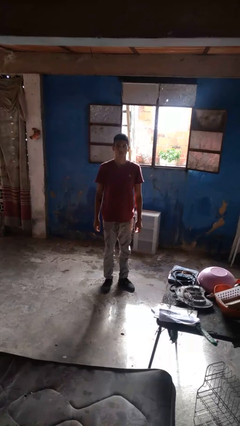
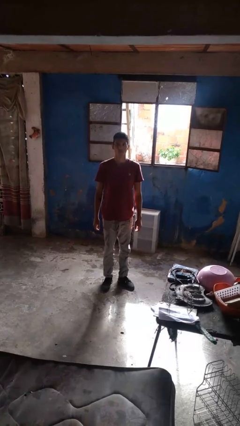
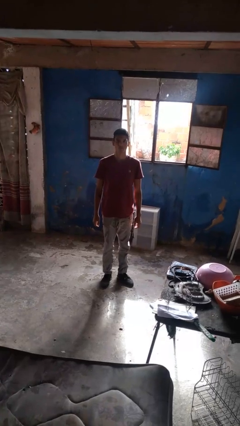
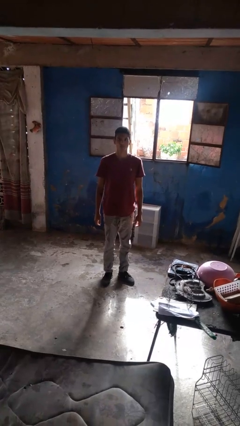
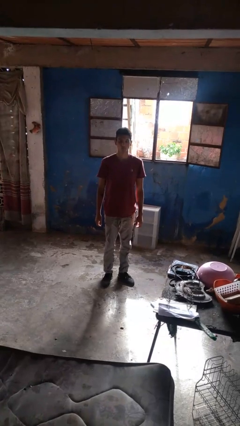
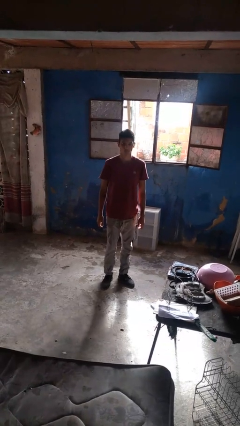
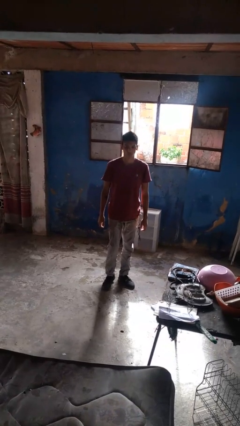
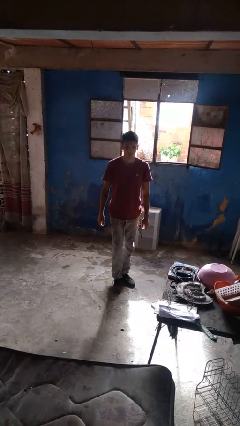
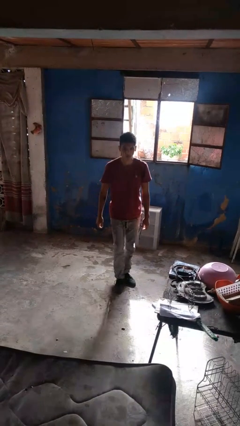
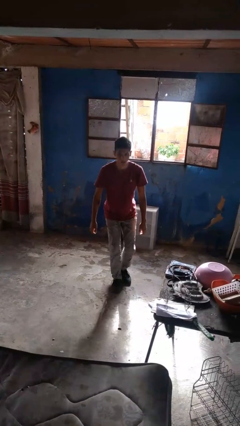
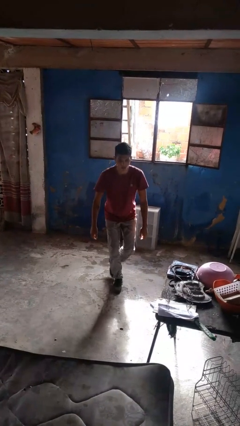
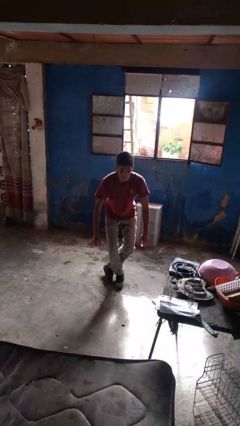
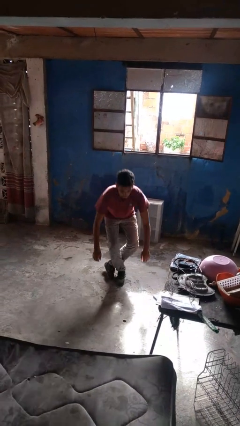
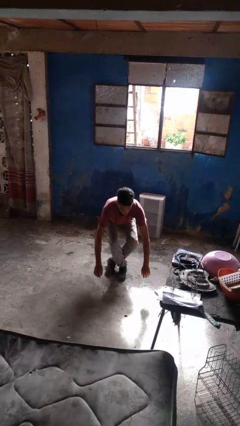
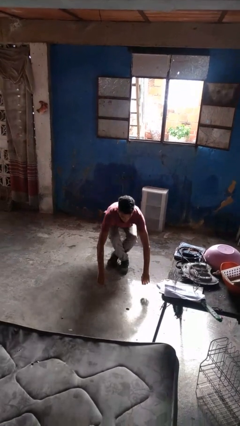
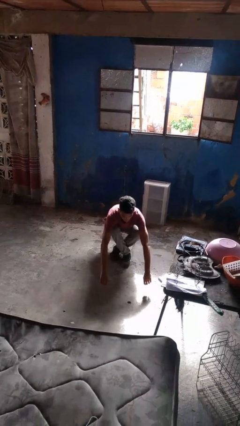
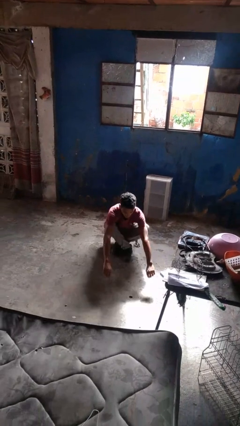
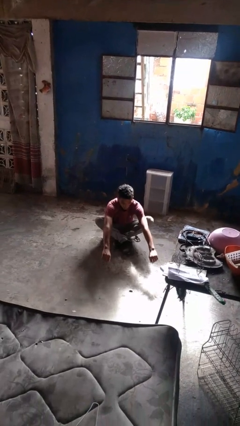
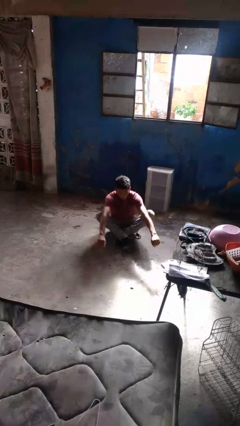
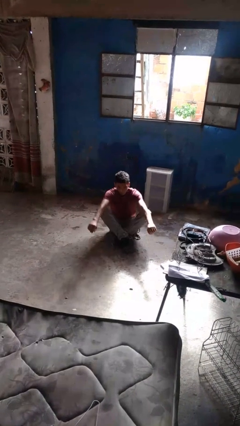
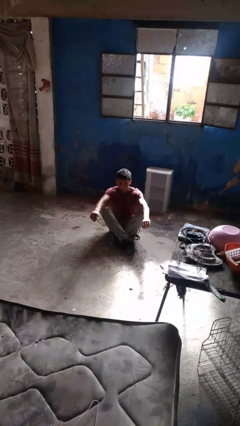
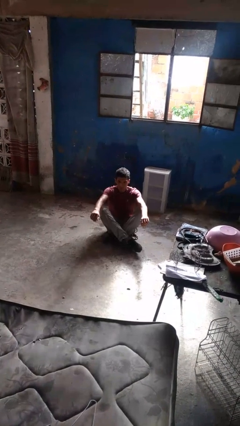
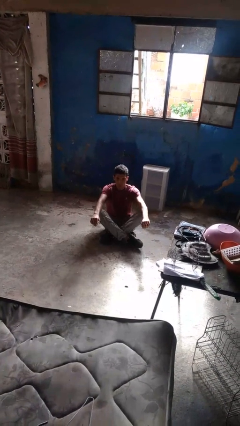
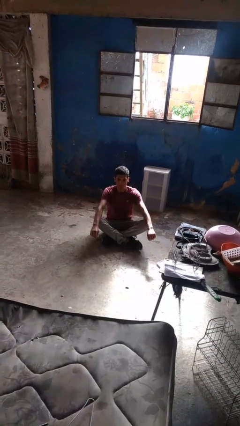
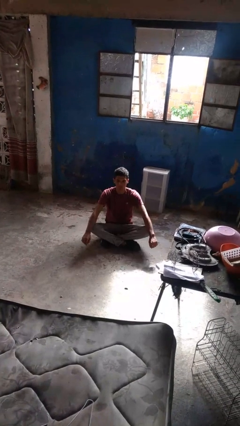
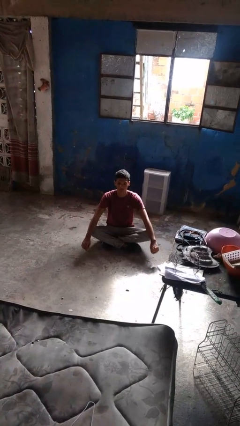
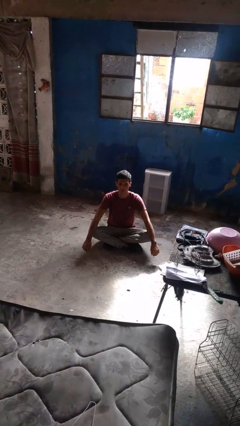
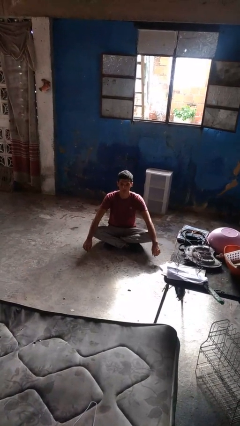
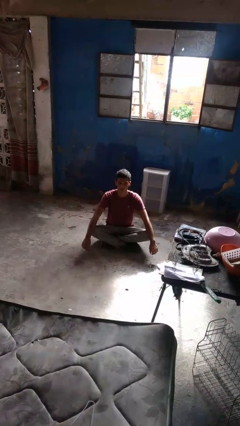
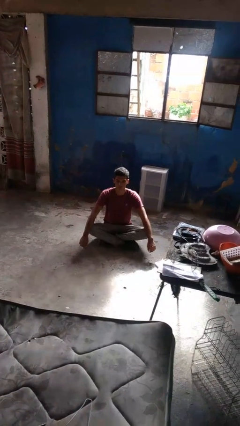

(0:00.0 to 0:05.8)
person sits crisscross

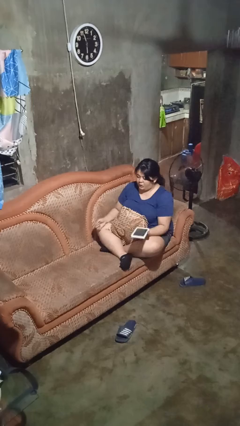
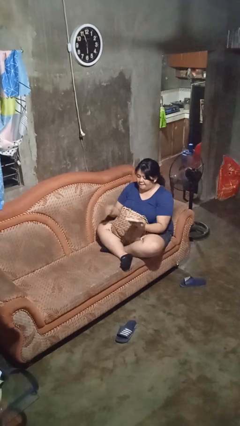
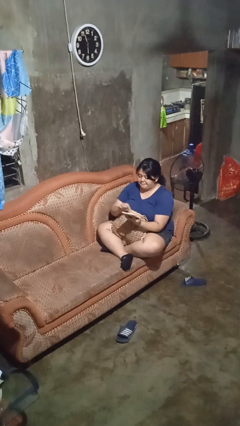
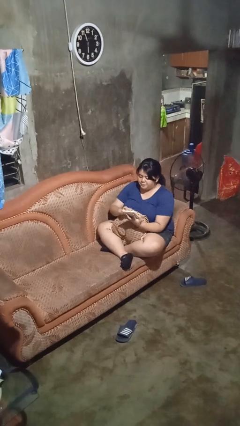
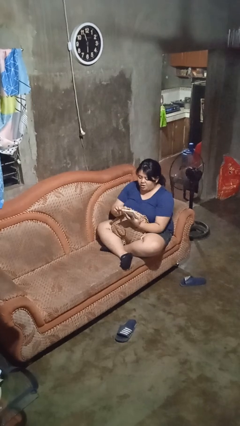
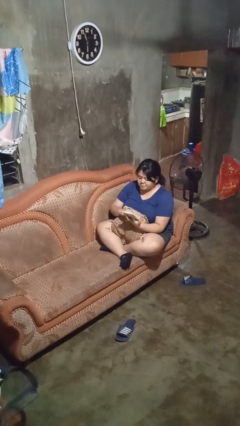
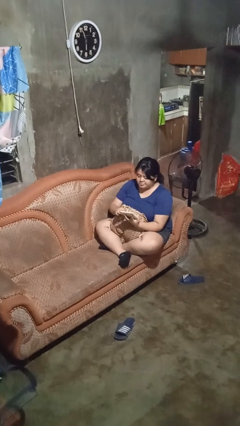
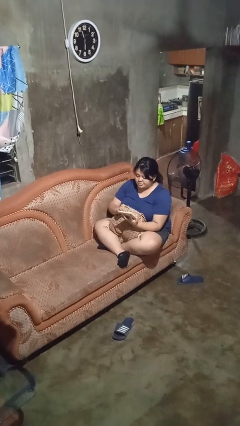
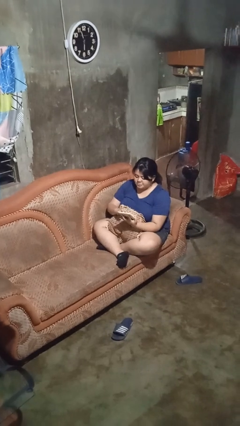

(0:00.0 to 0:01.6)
person interacts with tablet

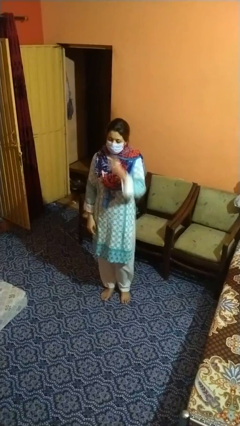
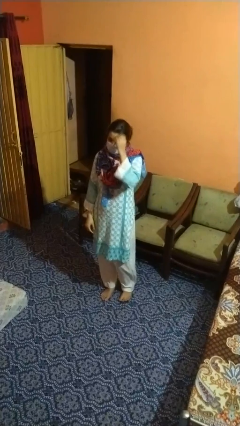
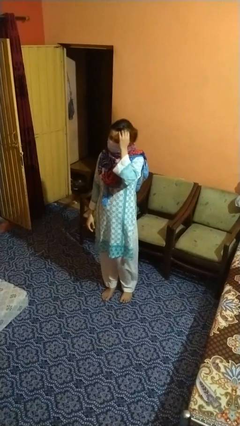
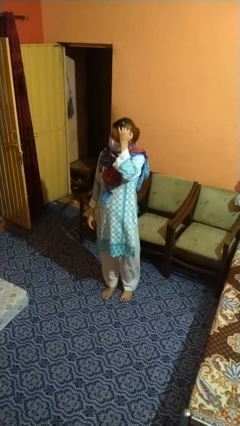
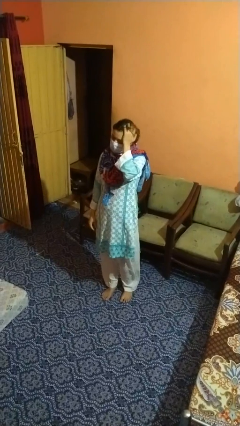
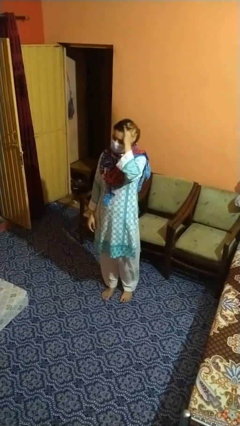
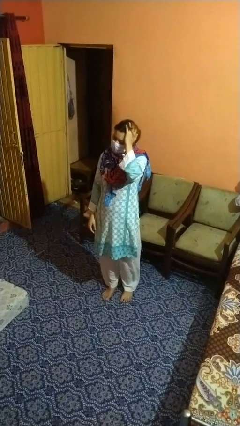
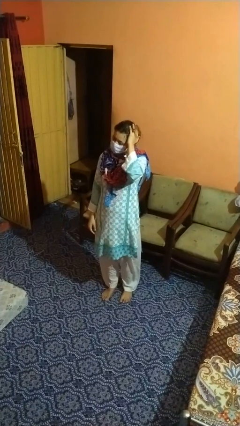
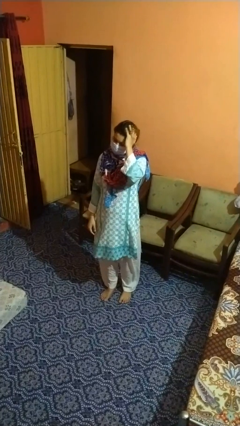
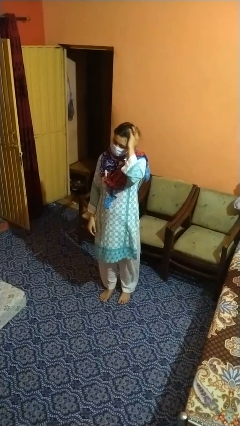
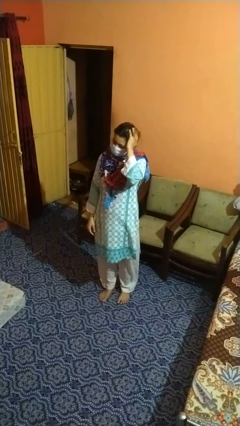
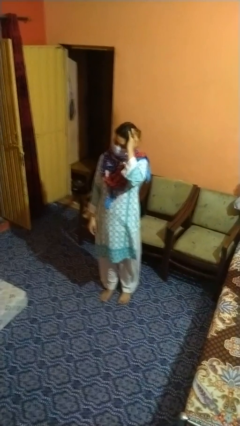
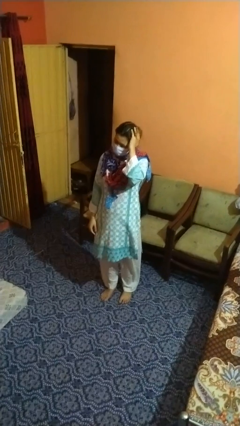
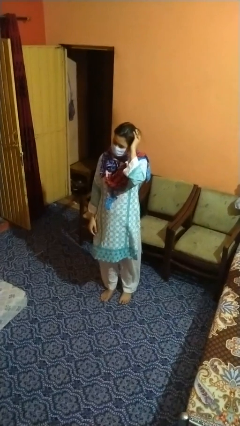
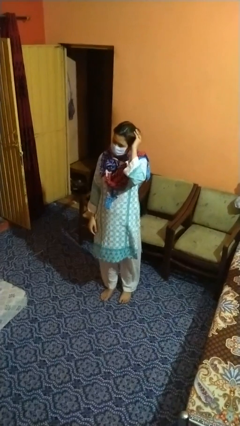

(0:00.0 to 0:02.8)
person strokes hair

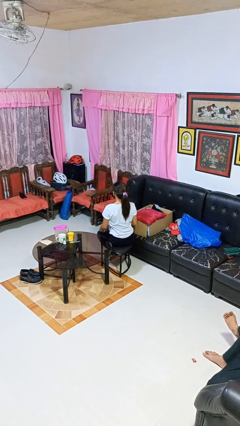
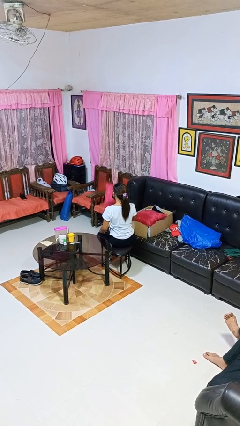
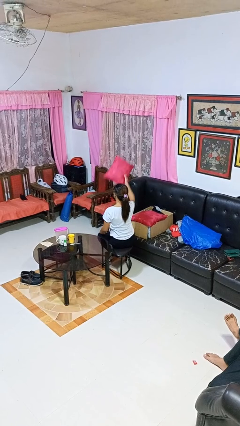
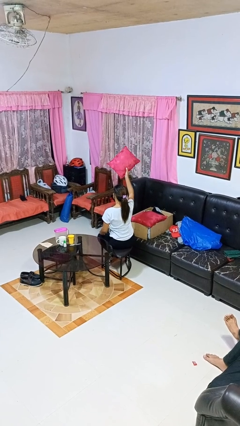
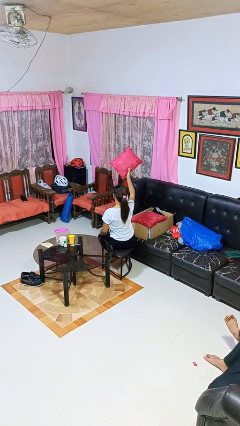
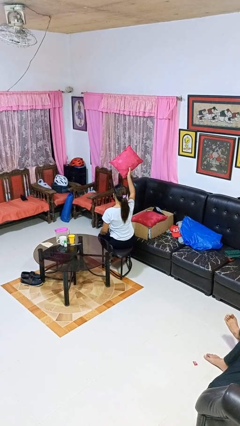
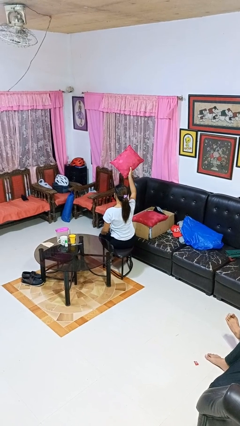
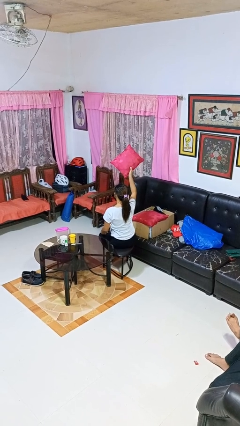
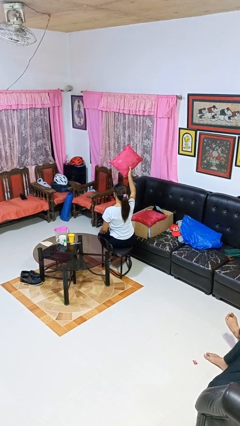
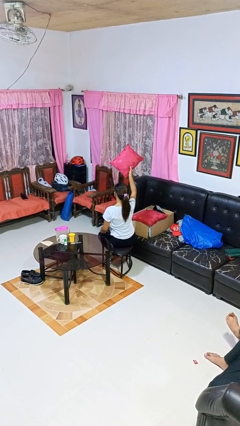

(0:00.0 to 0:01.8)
person holds object above head

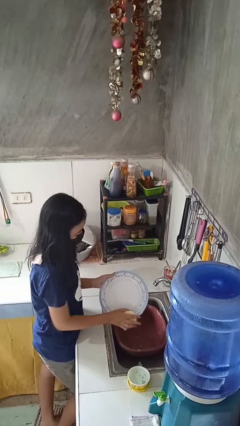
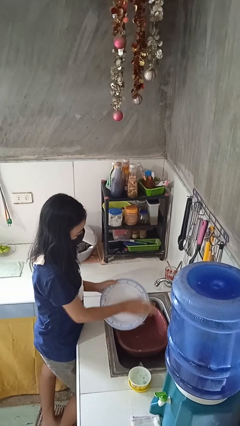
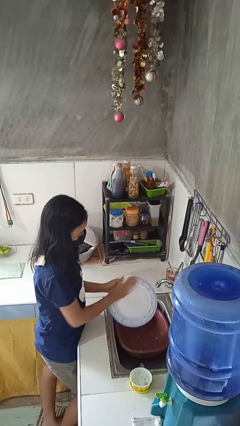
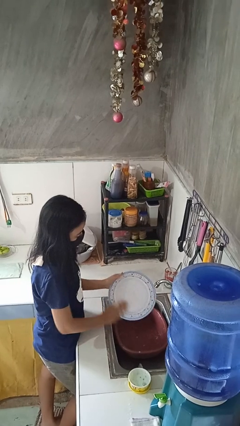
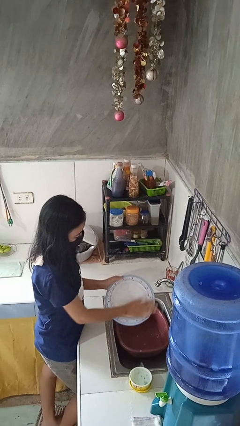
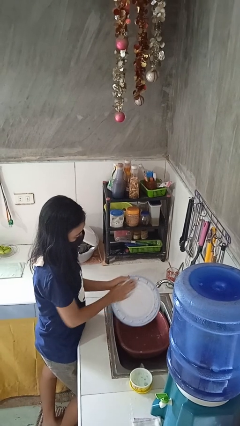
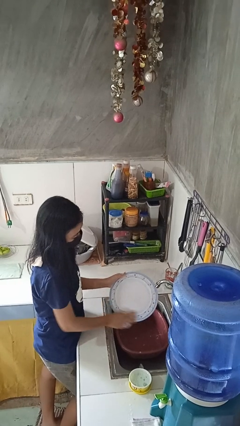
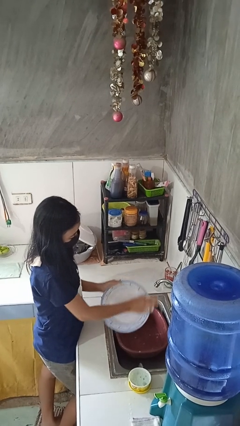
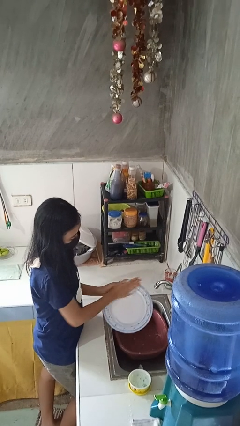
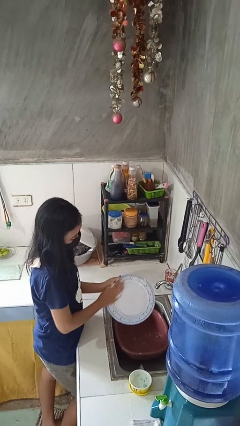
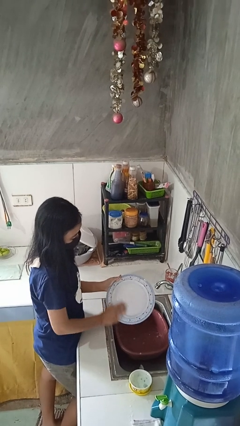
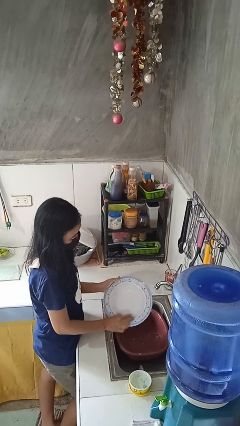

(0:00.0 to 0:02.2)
person washes dish

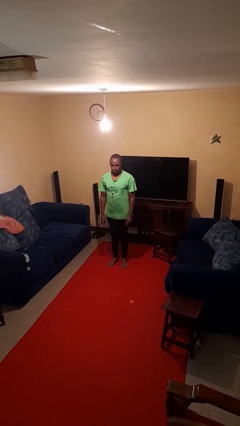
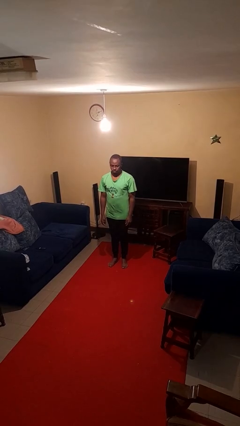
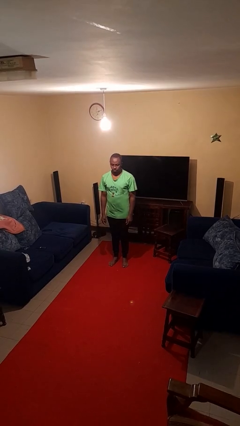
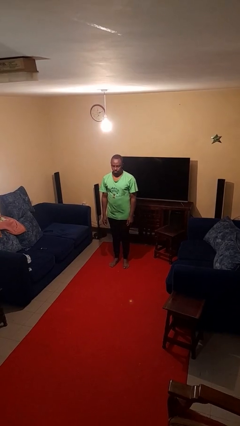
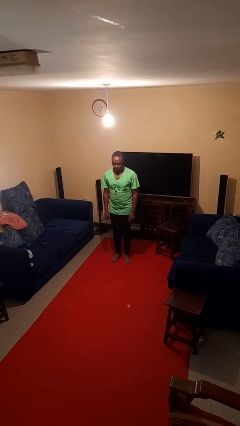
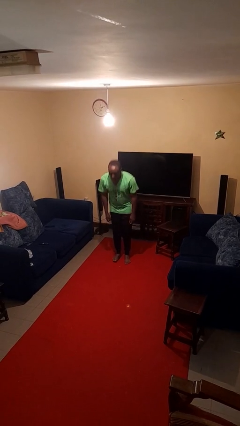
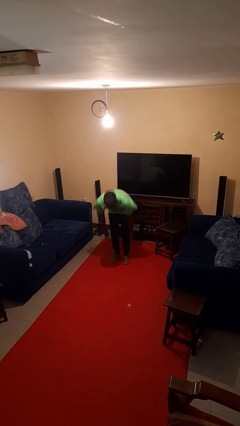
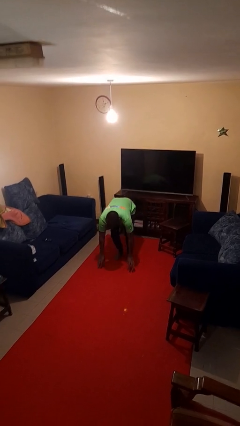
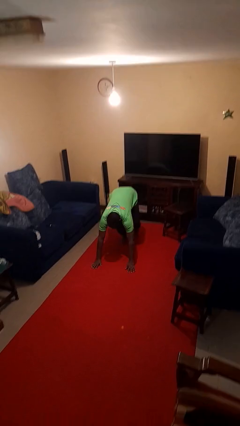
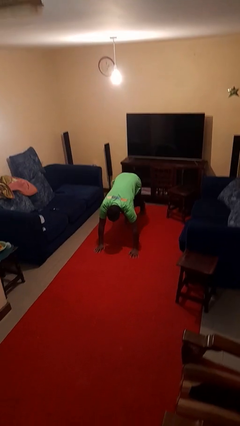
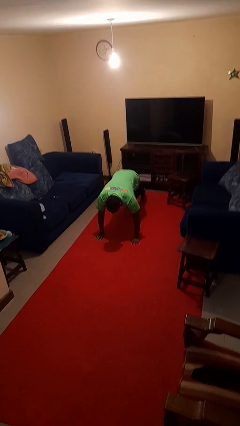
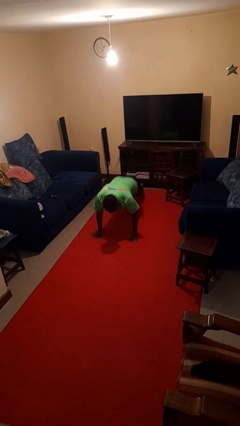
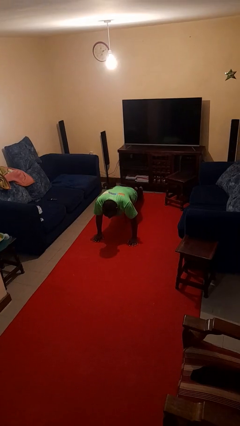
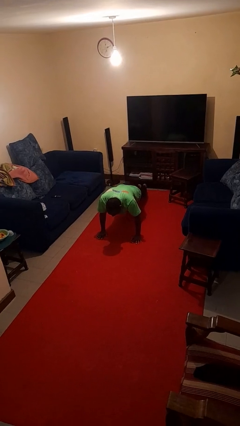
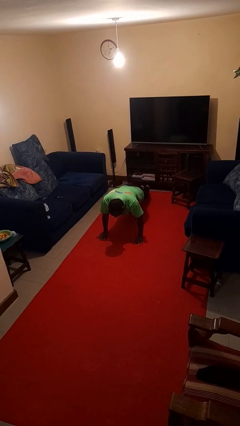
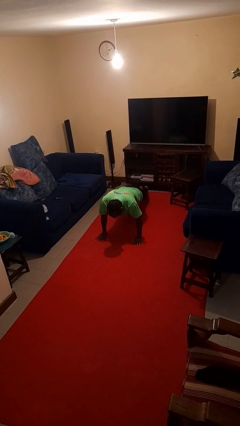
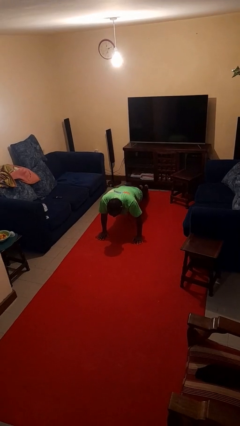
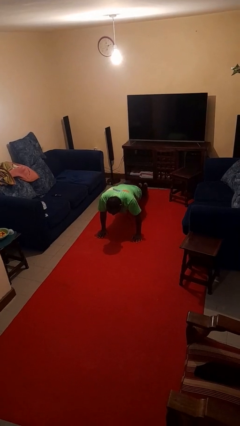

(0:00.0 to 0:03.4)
person exercises with plank
